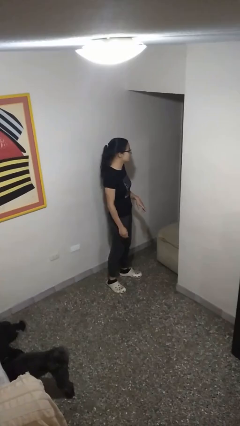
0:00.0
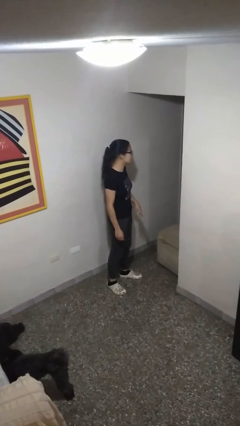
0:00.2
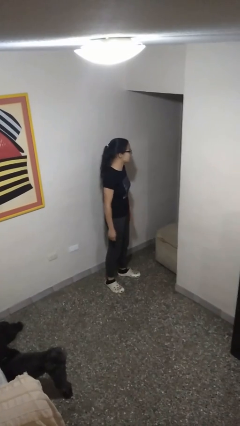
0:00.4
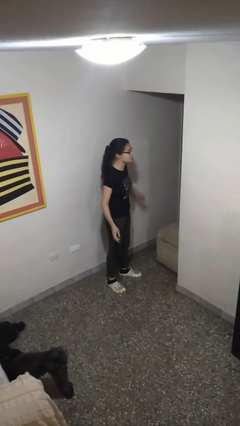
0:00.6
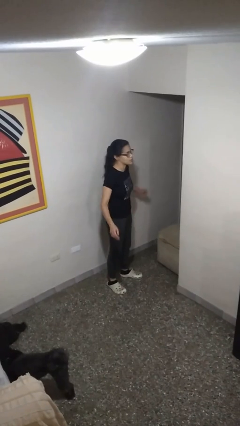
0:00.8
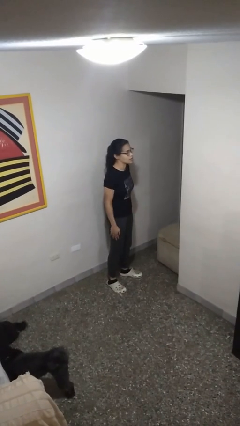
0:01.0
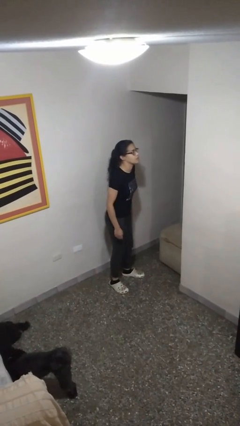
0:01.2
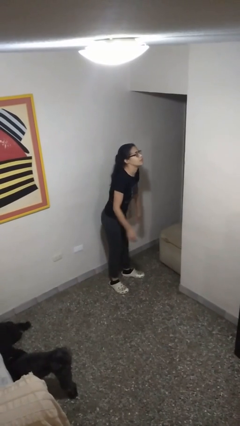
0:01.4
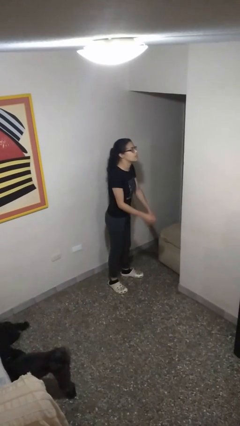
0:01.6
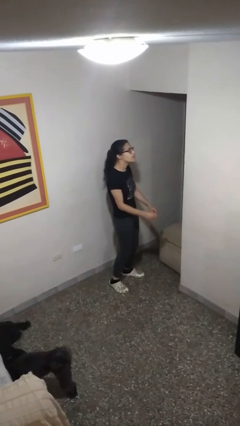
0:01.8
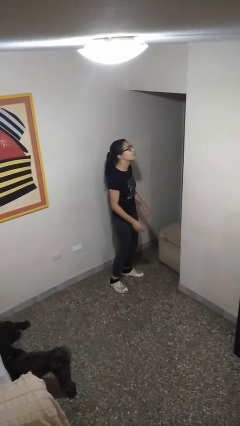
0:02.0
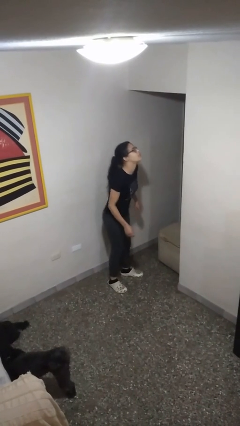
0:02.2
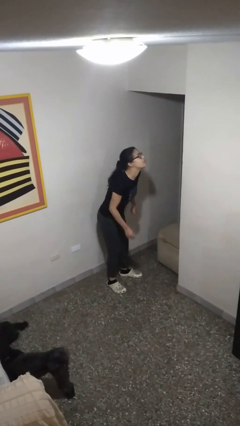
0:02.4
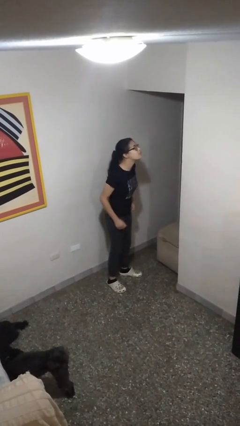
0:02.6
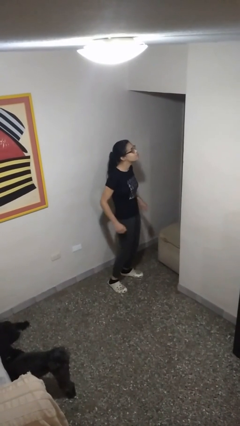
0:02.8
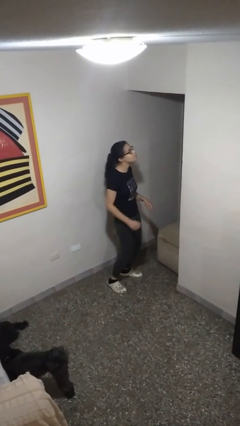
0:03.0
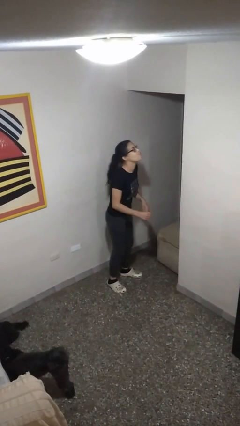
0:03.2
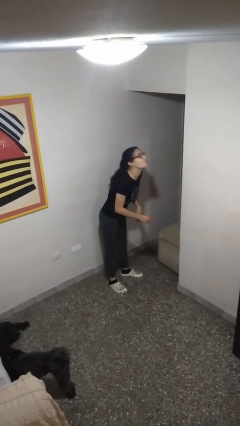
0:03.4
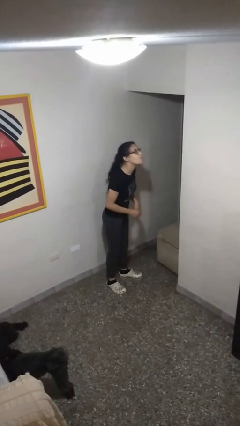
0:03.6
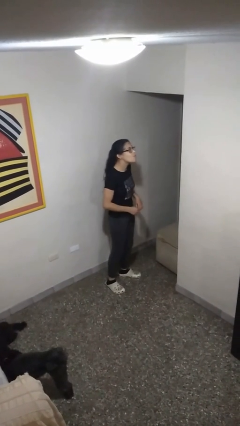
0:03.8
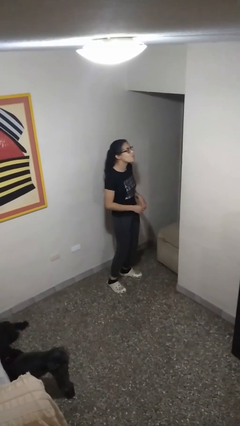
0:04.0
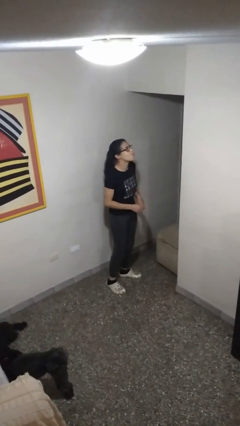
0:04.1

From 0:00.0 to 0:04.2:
person wiggles hips

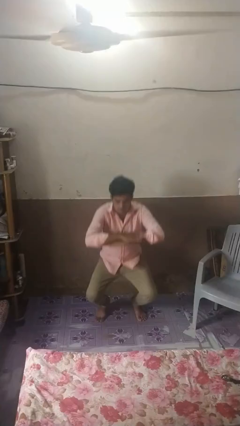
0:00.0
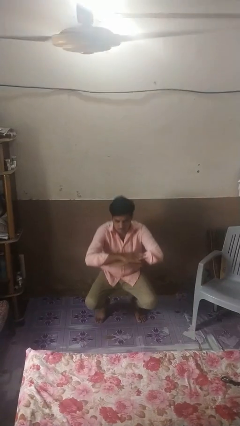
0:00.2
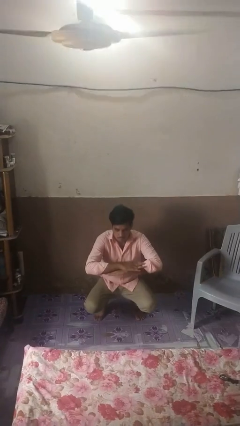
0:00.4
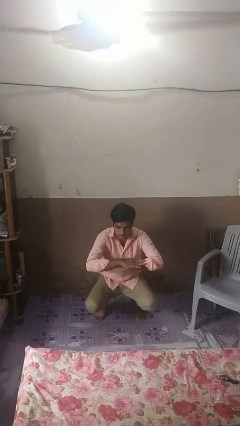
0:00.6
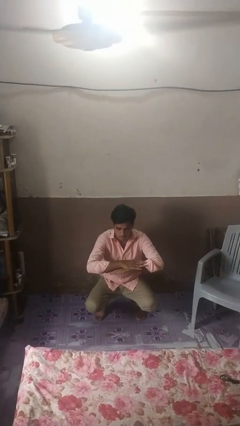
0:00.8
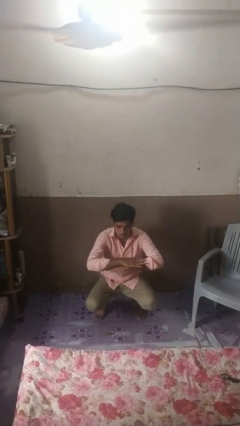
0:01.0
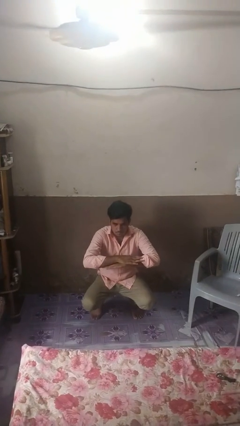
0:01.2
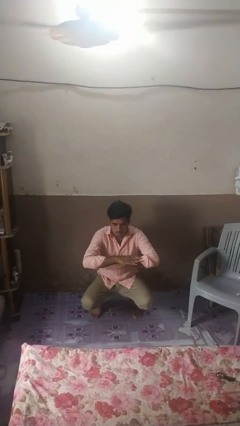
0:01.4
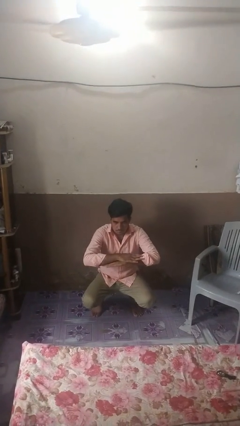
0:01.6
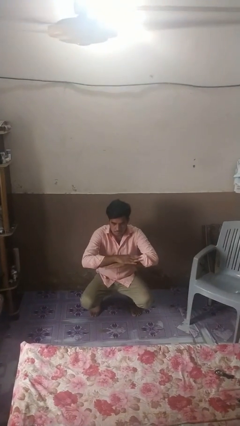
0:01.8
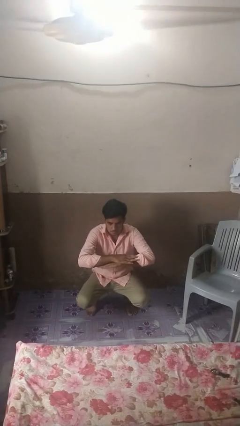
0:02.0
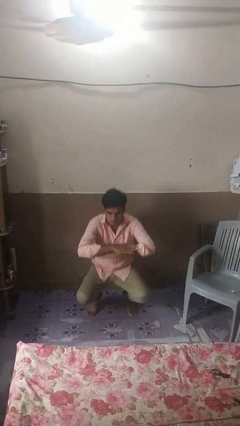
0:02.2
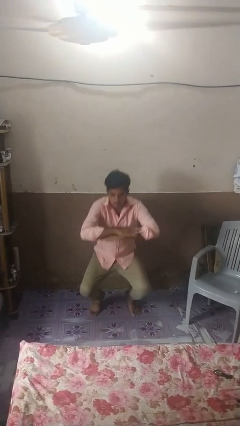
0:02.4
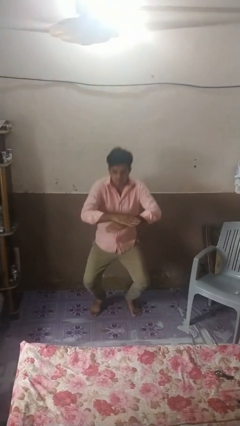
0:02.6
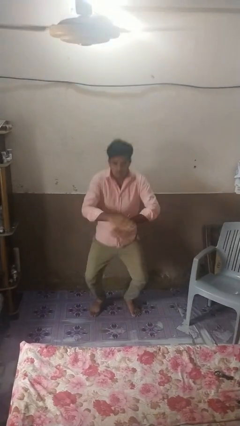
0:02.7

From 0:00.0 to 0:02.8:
person squats

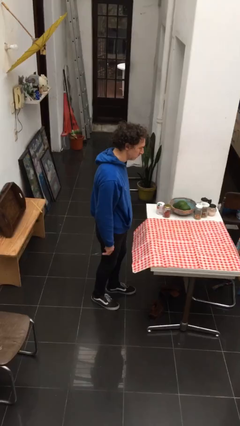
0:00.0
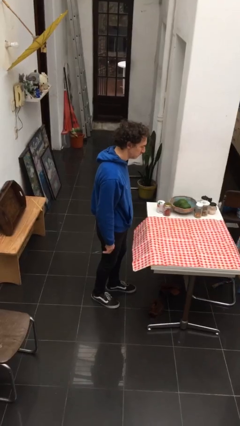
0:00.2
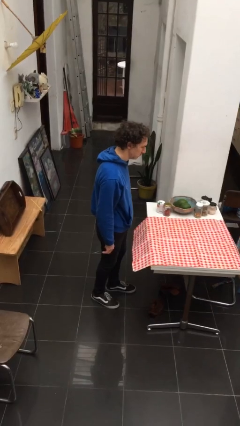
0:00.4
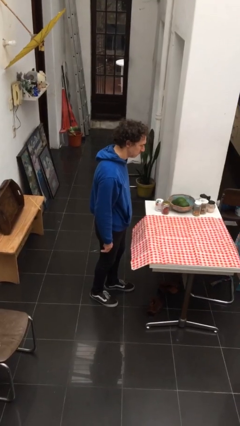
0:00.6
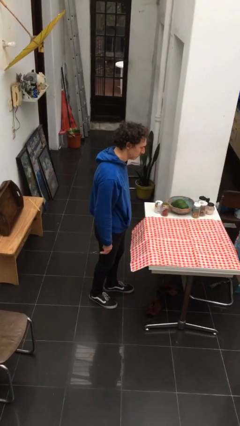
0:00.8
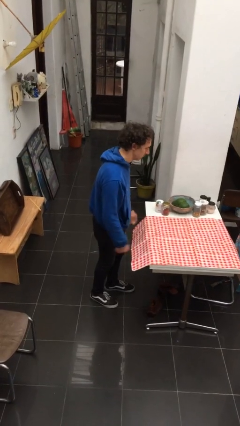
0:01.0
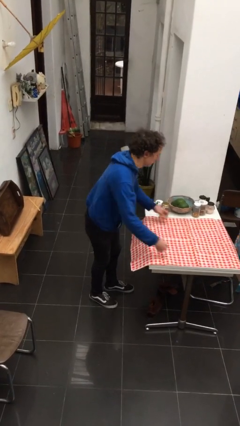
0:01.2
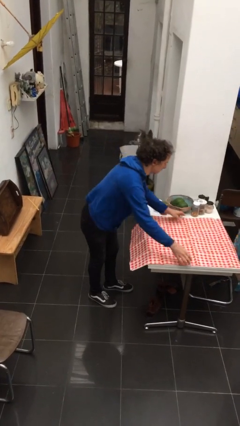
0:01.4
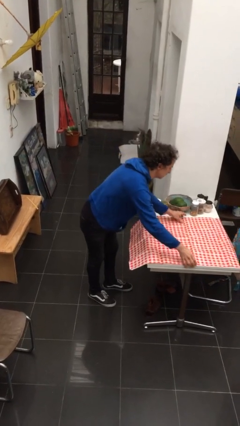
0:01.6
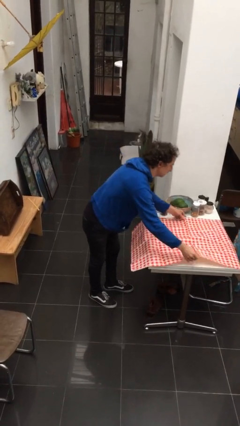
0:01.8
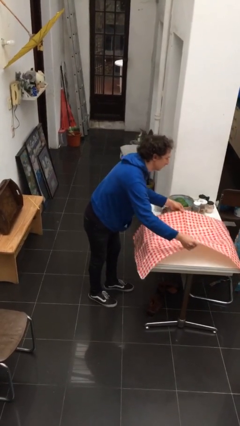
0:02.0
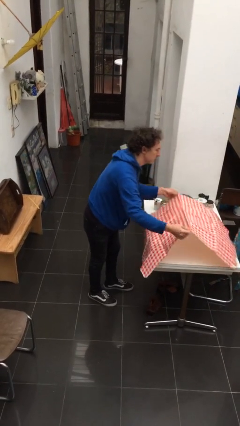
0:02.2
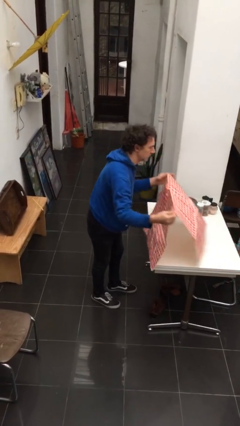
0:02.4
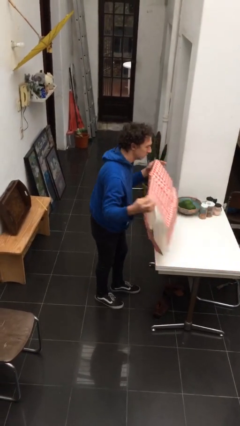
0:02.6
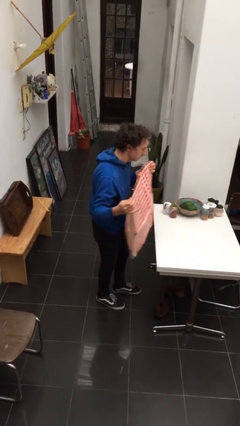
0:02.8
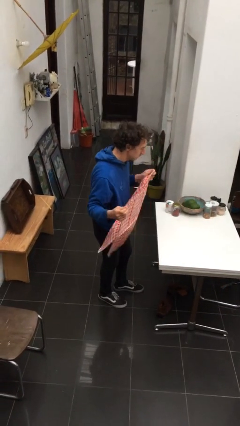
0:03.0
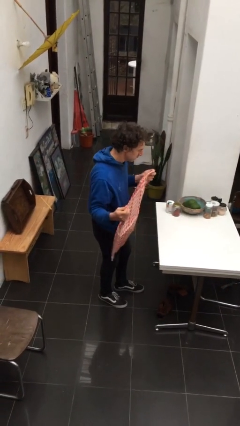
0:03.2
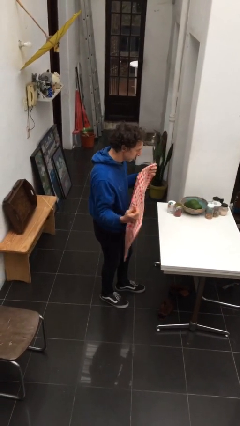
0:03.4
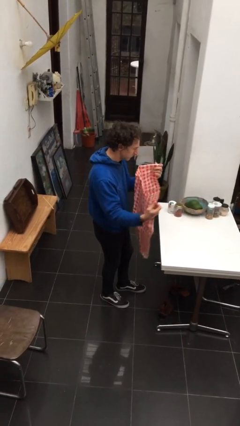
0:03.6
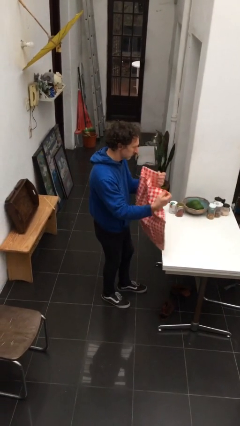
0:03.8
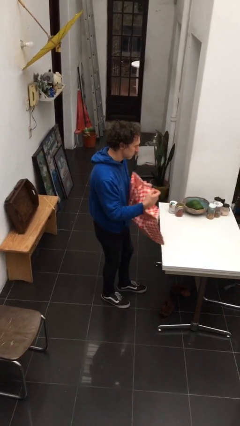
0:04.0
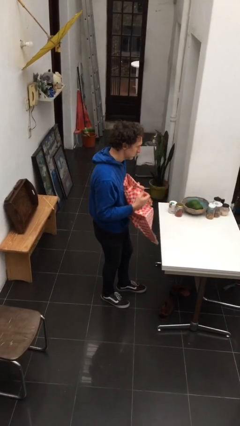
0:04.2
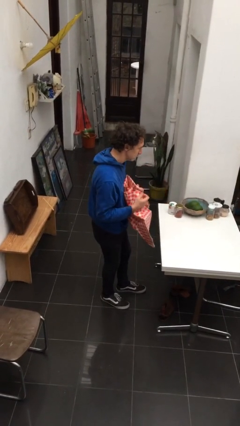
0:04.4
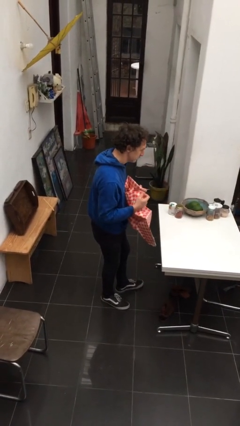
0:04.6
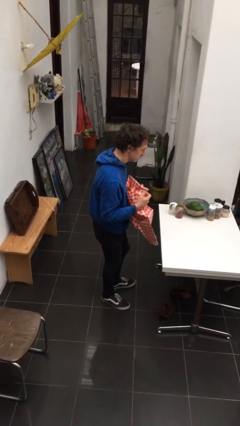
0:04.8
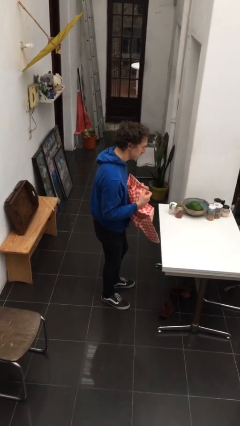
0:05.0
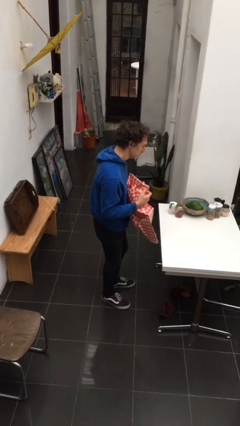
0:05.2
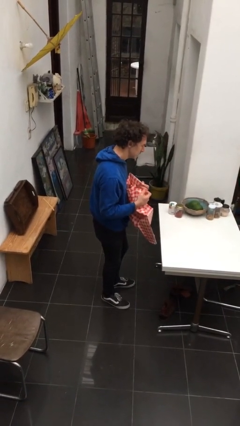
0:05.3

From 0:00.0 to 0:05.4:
person folds tablecloth

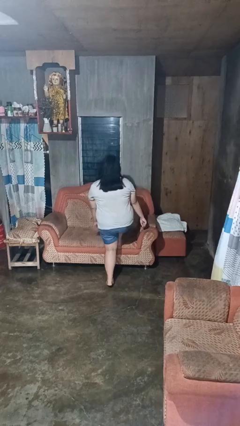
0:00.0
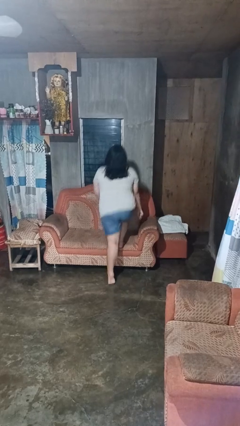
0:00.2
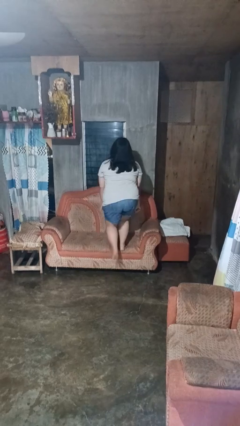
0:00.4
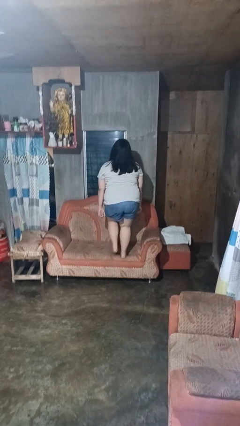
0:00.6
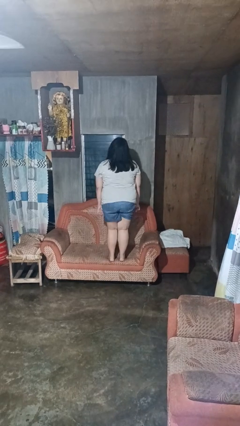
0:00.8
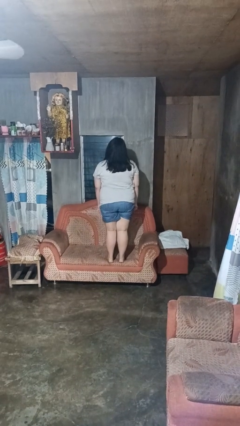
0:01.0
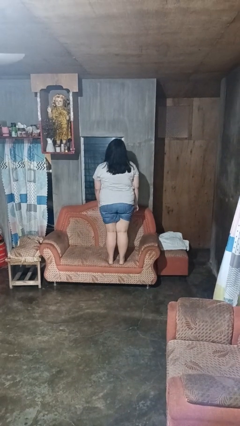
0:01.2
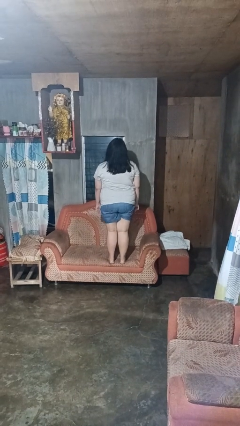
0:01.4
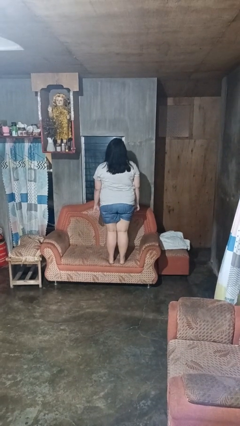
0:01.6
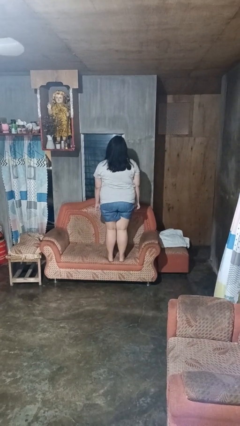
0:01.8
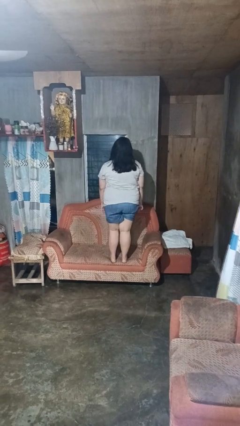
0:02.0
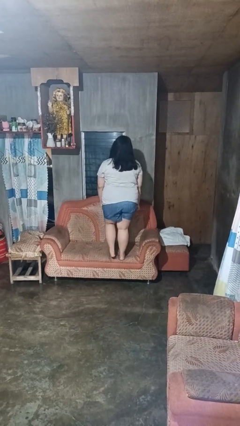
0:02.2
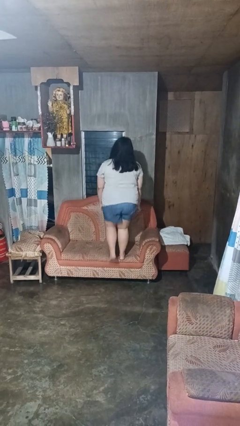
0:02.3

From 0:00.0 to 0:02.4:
person climbs on couch

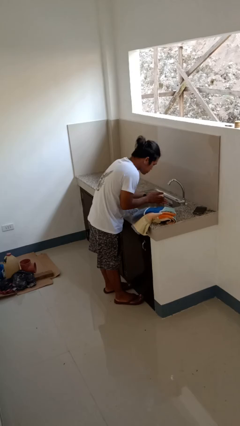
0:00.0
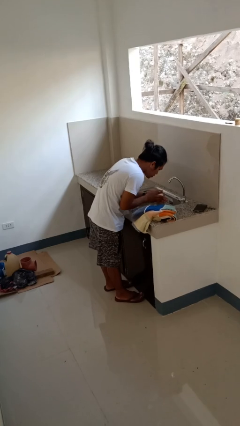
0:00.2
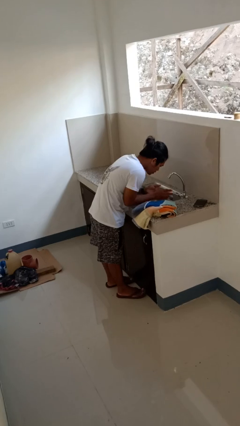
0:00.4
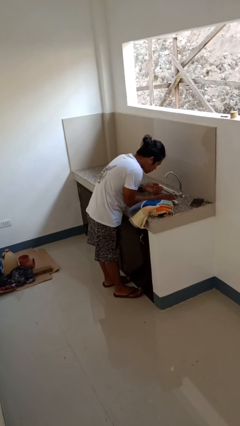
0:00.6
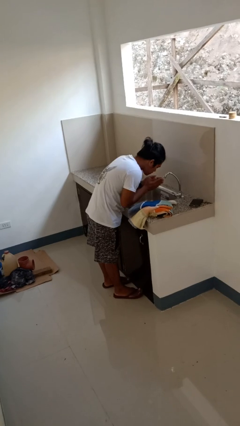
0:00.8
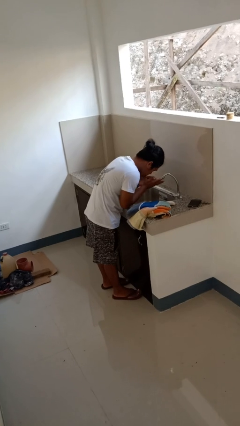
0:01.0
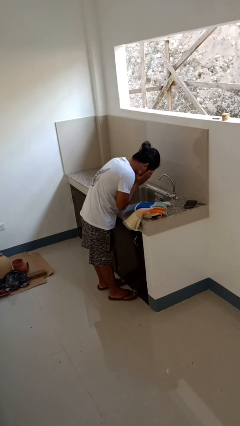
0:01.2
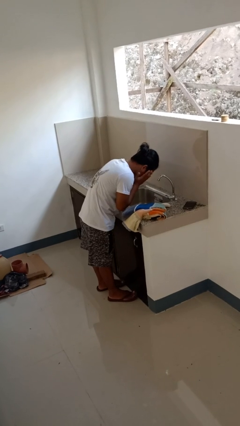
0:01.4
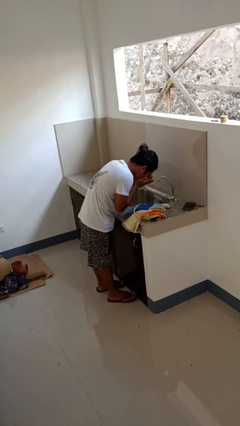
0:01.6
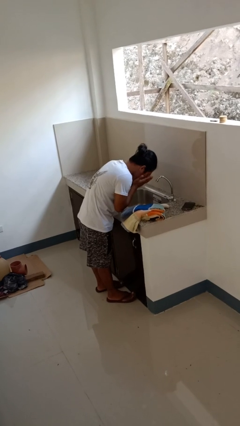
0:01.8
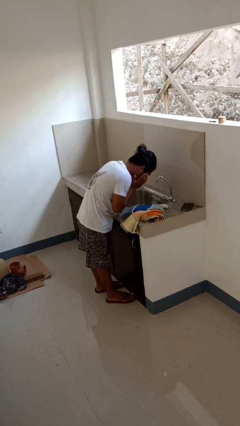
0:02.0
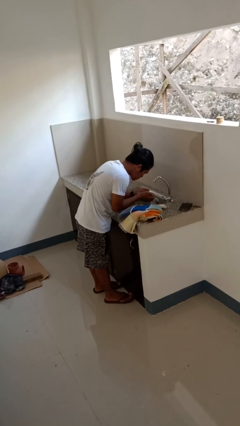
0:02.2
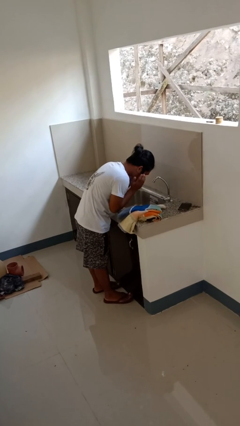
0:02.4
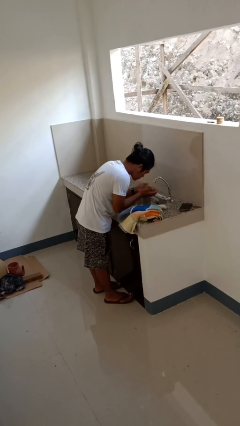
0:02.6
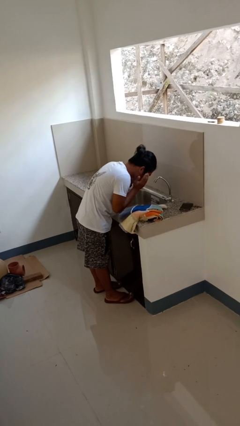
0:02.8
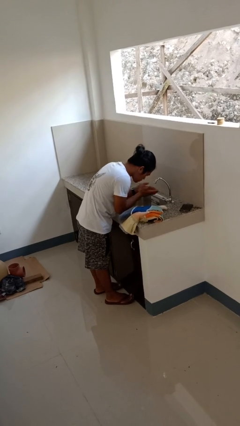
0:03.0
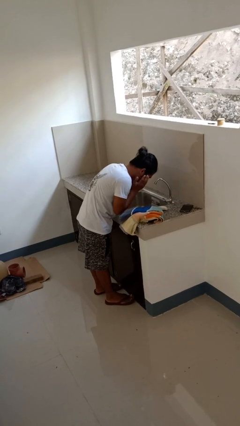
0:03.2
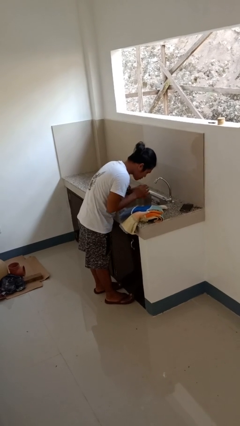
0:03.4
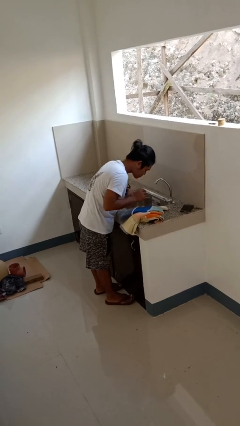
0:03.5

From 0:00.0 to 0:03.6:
person washes face
